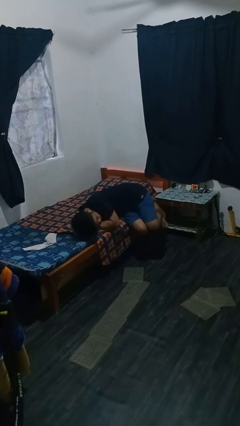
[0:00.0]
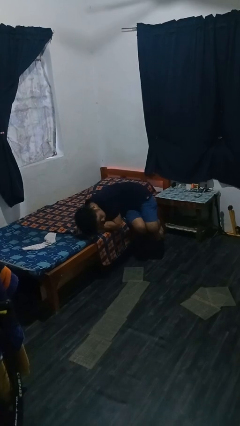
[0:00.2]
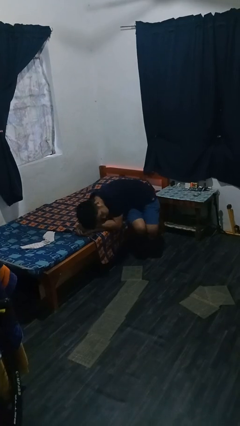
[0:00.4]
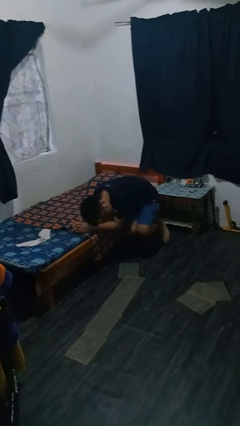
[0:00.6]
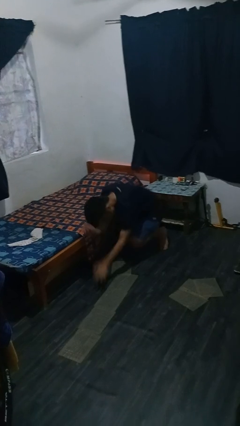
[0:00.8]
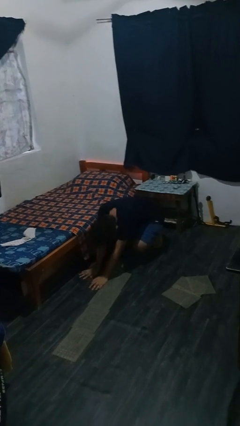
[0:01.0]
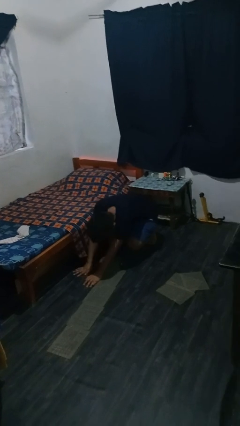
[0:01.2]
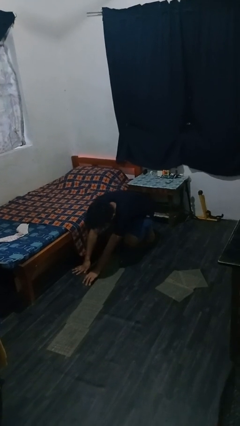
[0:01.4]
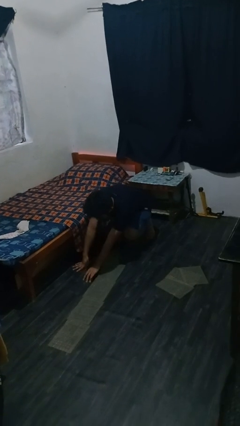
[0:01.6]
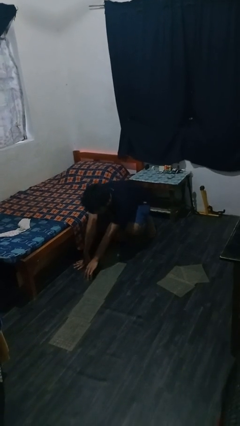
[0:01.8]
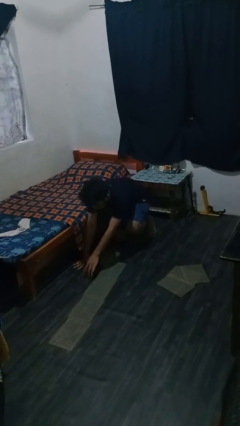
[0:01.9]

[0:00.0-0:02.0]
person falls from bed

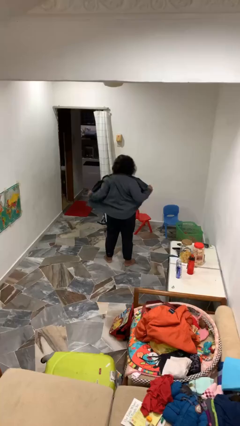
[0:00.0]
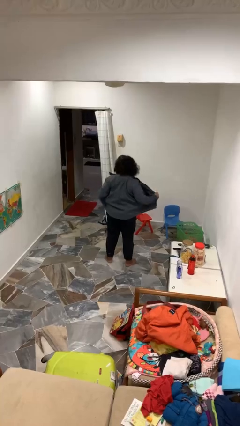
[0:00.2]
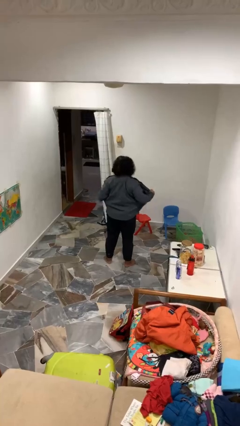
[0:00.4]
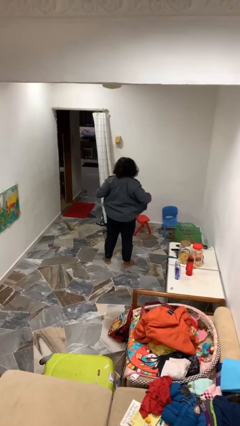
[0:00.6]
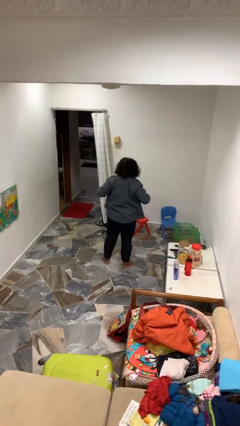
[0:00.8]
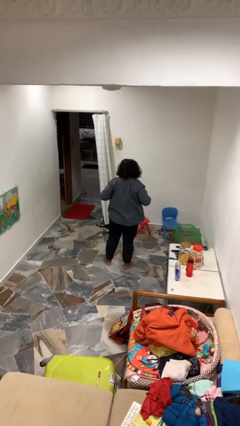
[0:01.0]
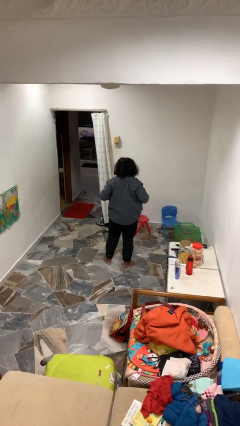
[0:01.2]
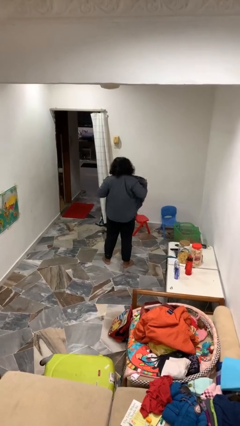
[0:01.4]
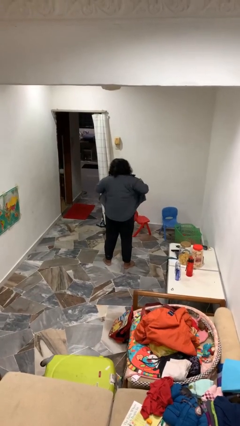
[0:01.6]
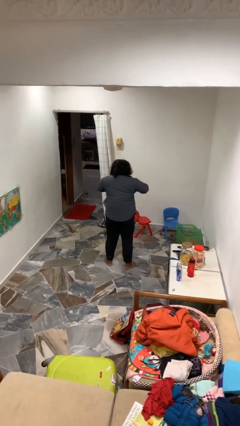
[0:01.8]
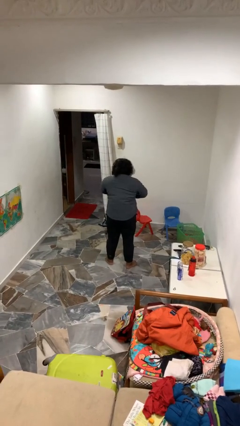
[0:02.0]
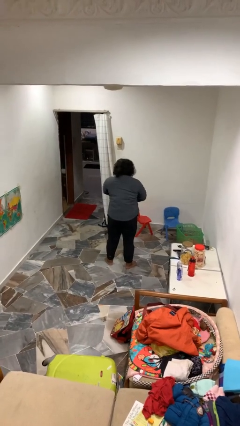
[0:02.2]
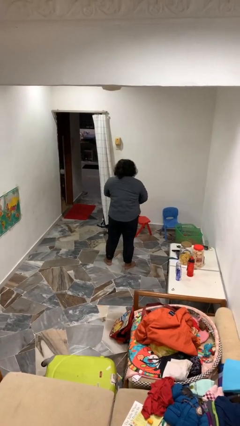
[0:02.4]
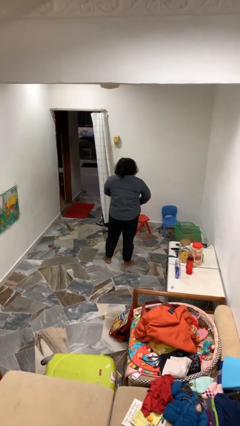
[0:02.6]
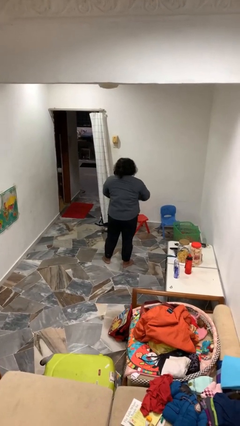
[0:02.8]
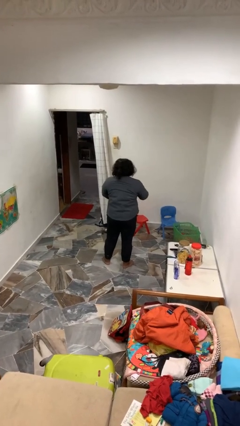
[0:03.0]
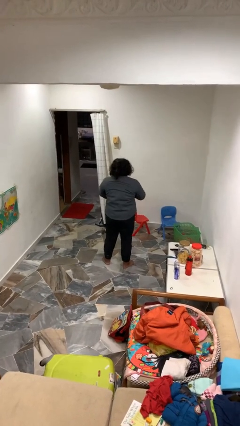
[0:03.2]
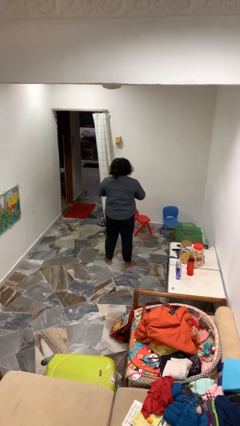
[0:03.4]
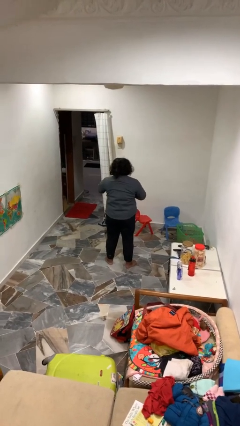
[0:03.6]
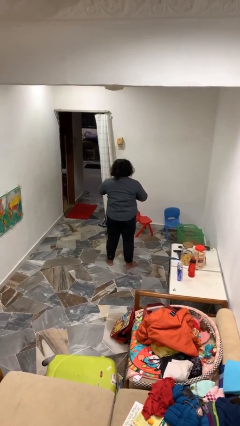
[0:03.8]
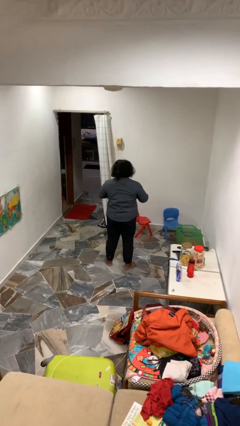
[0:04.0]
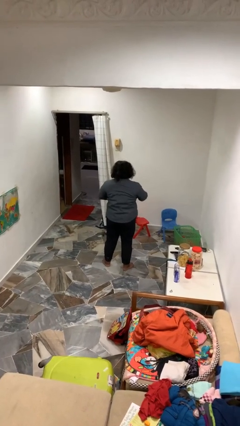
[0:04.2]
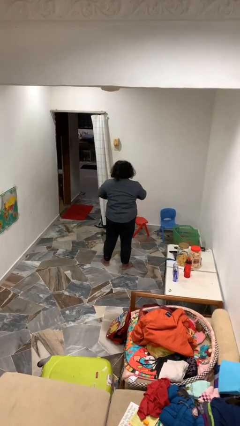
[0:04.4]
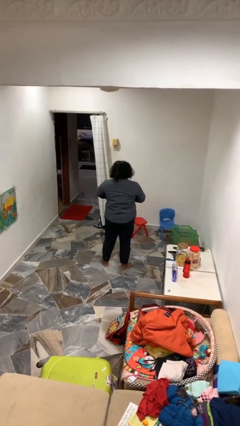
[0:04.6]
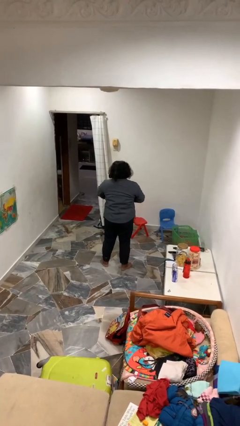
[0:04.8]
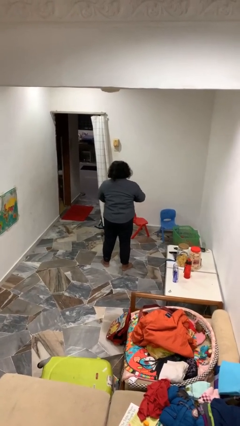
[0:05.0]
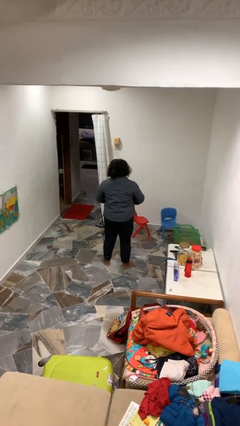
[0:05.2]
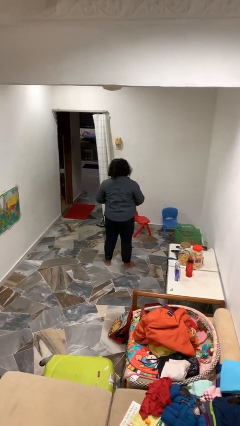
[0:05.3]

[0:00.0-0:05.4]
person buttons shirt

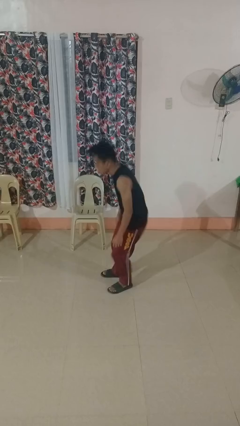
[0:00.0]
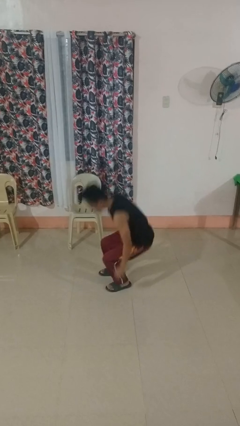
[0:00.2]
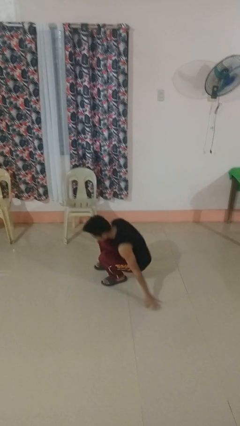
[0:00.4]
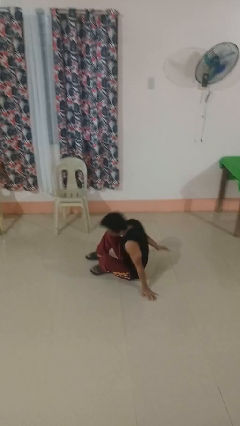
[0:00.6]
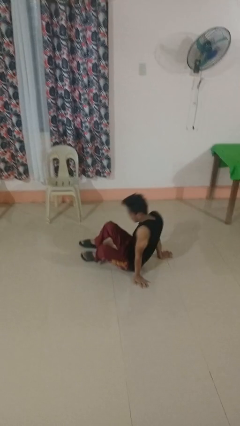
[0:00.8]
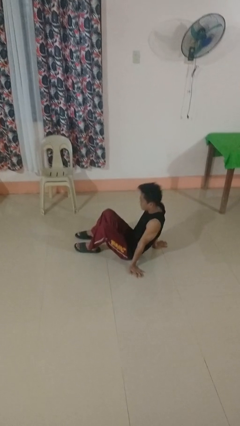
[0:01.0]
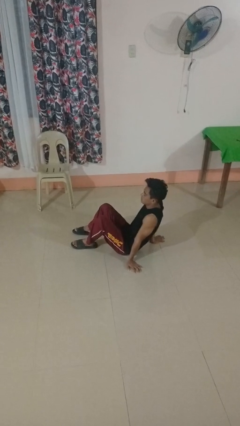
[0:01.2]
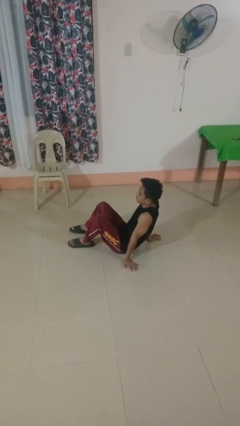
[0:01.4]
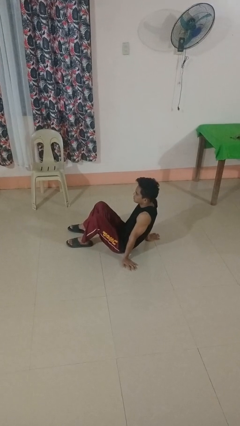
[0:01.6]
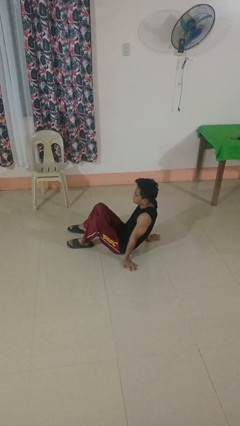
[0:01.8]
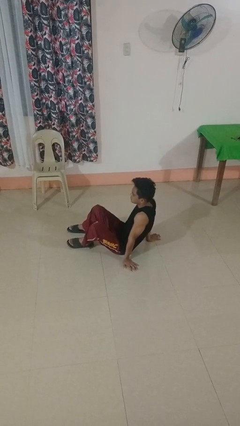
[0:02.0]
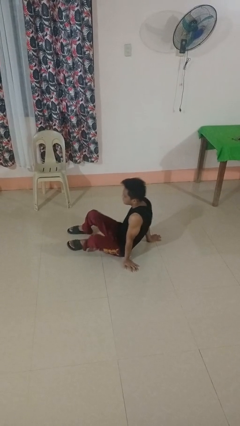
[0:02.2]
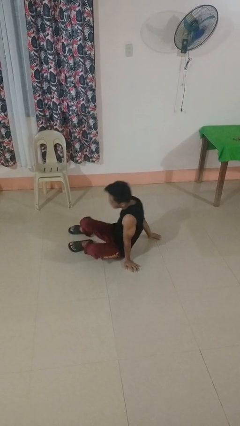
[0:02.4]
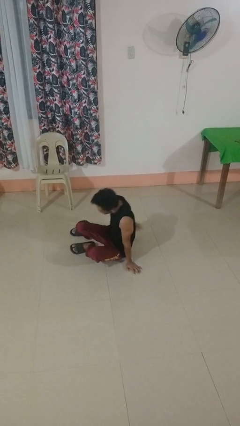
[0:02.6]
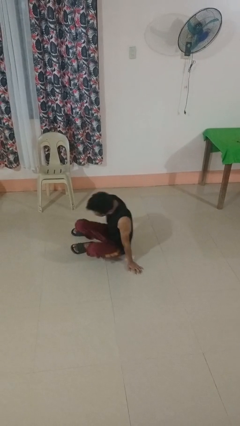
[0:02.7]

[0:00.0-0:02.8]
person falls while standing

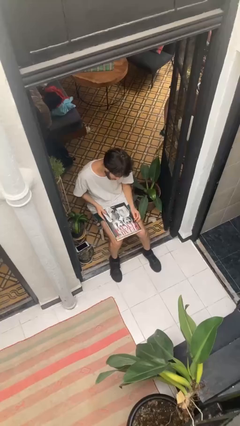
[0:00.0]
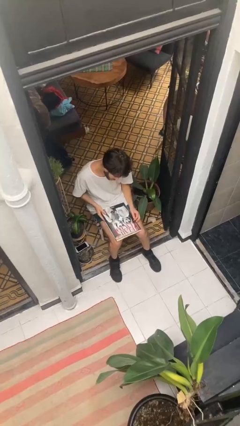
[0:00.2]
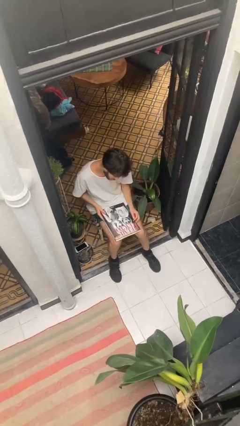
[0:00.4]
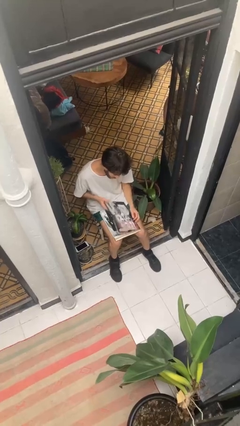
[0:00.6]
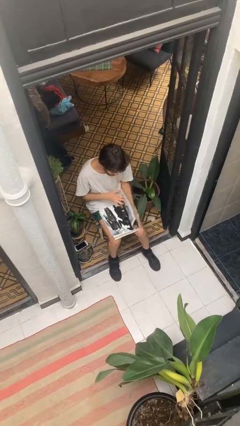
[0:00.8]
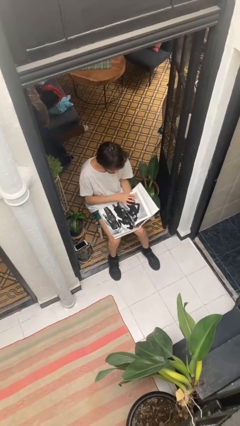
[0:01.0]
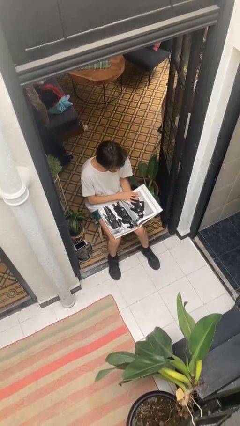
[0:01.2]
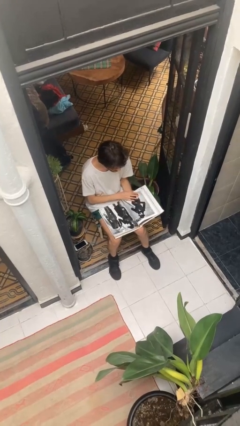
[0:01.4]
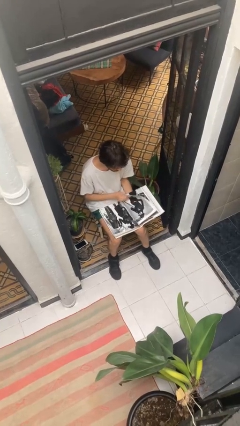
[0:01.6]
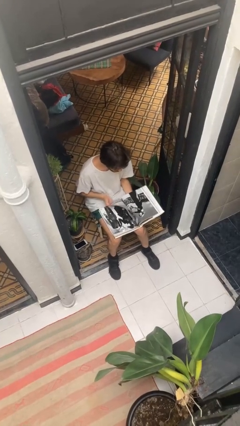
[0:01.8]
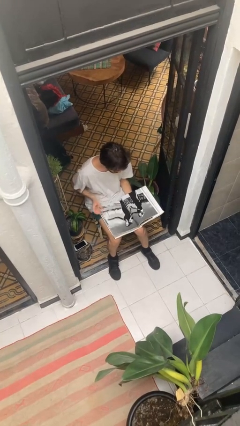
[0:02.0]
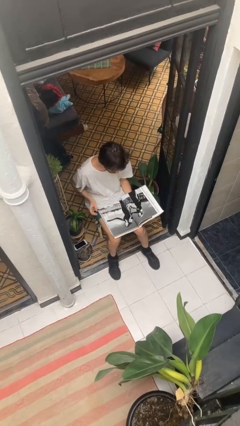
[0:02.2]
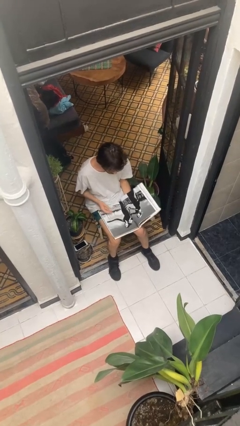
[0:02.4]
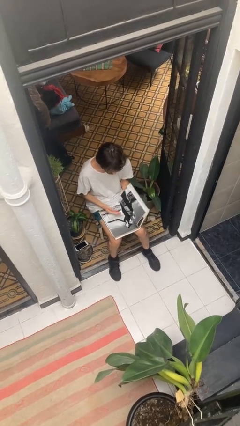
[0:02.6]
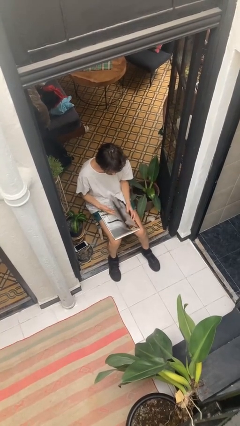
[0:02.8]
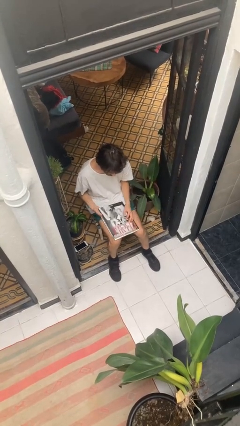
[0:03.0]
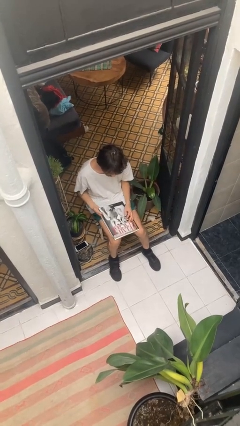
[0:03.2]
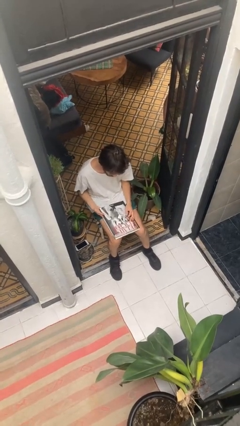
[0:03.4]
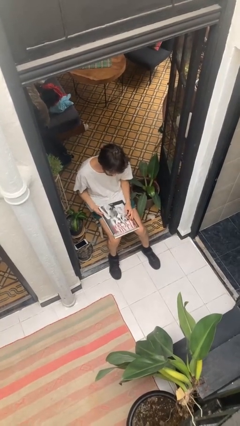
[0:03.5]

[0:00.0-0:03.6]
person reads document

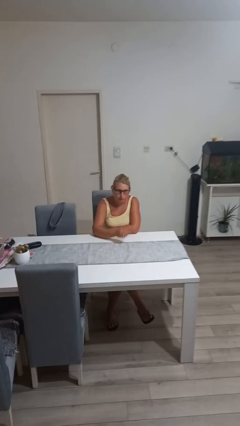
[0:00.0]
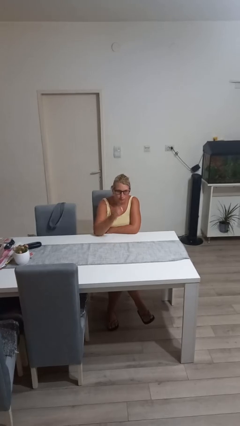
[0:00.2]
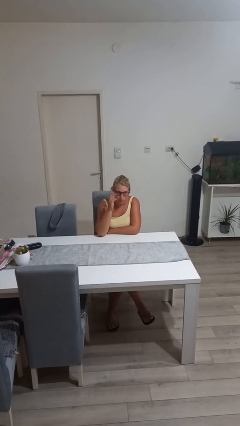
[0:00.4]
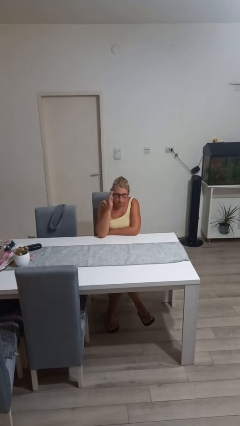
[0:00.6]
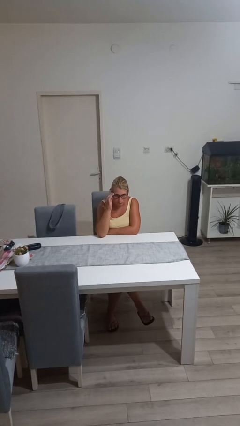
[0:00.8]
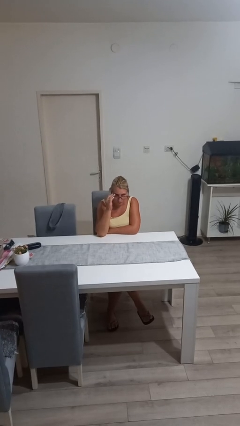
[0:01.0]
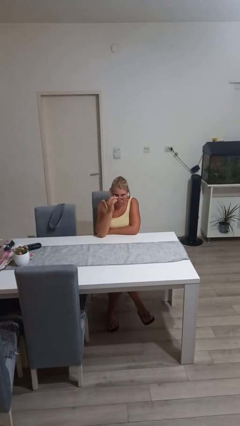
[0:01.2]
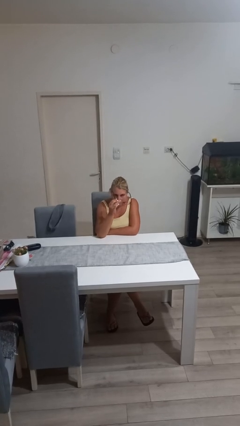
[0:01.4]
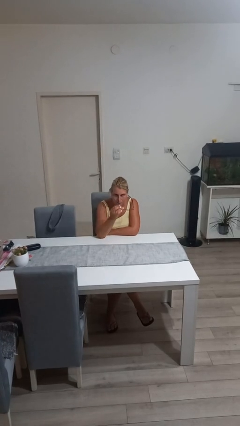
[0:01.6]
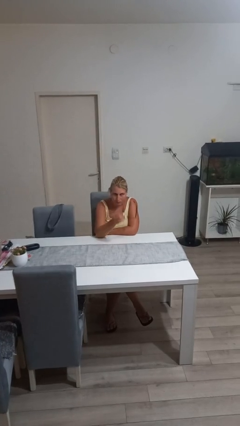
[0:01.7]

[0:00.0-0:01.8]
person takes off glasses

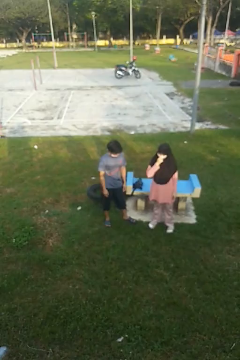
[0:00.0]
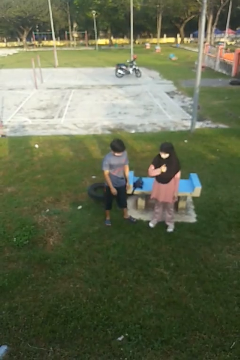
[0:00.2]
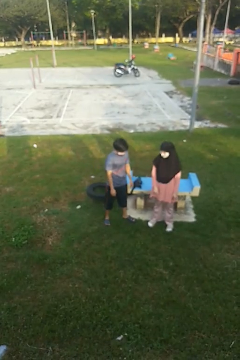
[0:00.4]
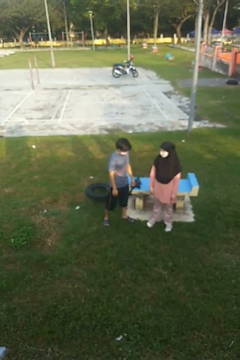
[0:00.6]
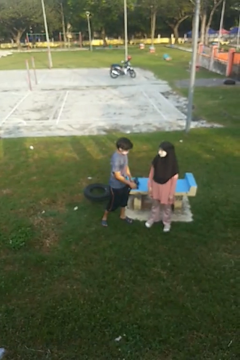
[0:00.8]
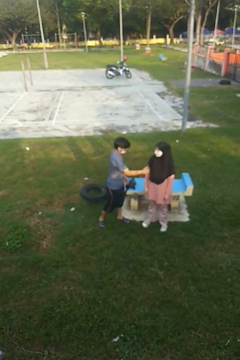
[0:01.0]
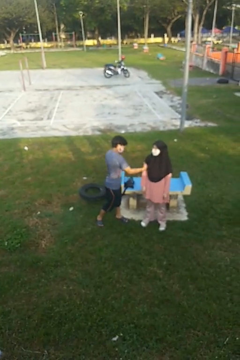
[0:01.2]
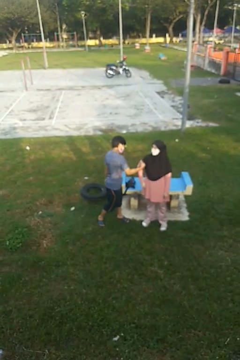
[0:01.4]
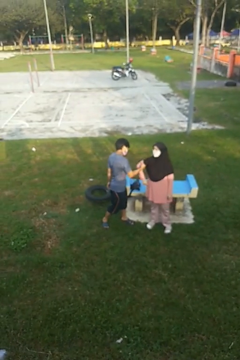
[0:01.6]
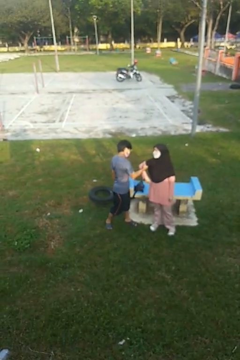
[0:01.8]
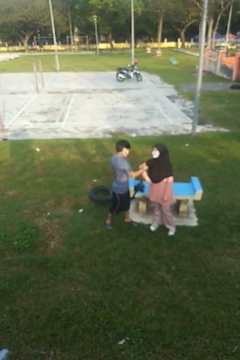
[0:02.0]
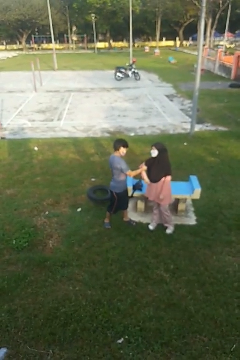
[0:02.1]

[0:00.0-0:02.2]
person grabs person by bicep
